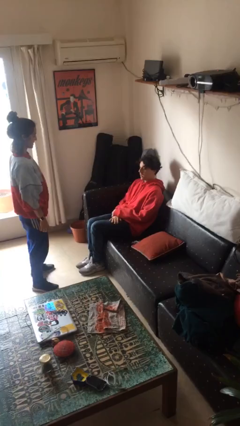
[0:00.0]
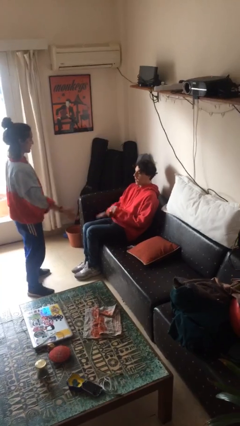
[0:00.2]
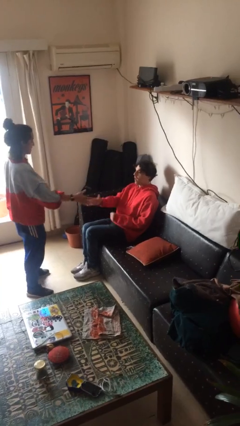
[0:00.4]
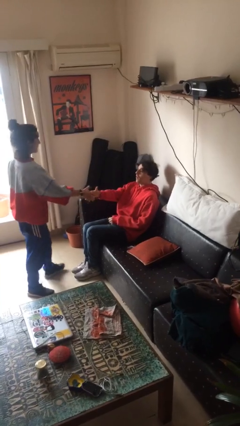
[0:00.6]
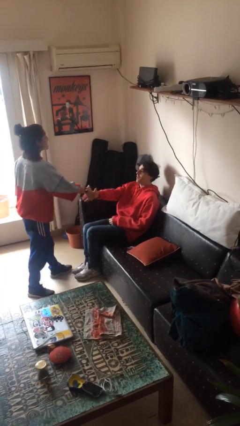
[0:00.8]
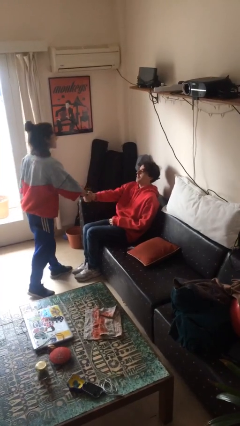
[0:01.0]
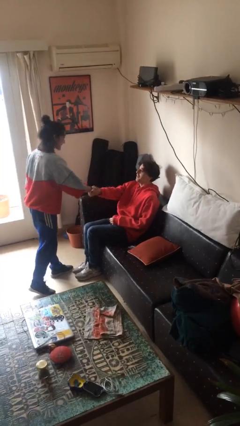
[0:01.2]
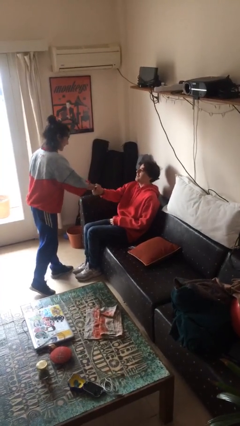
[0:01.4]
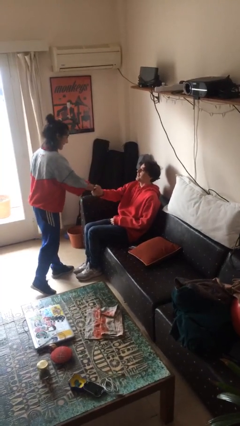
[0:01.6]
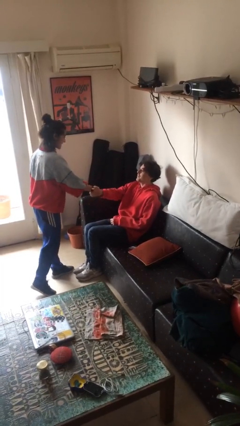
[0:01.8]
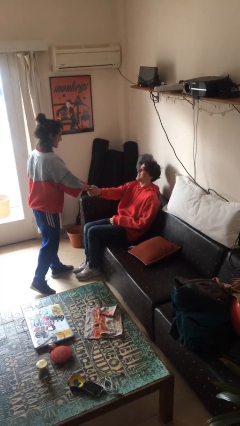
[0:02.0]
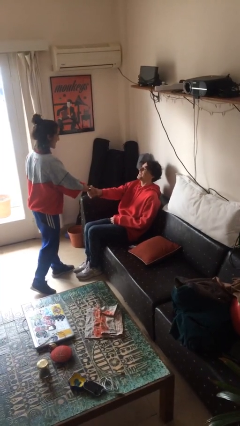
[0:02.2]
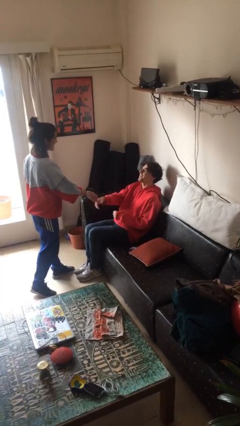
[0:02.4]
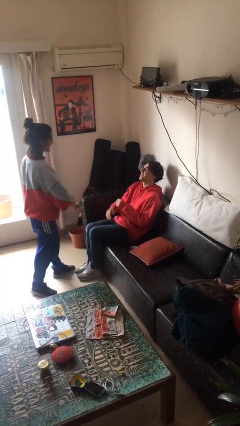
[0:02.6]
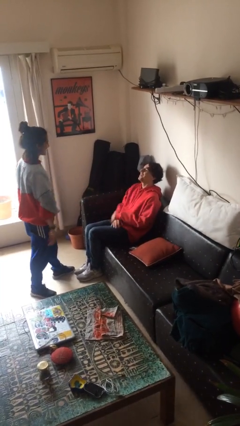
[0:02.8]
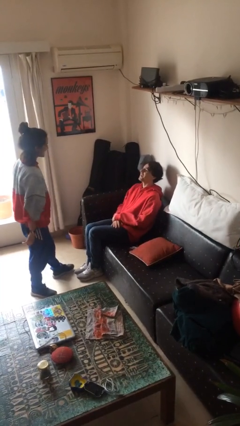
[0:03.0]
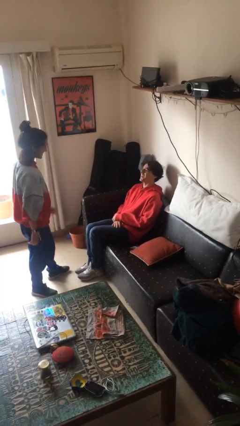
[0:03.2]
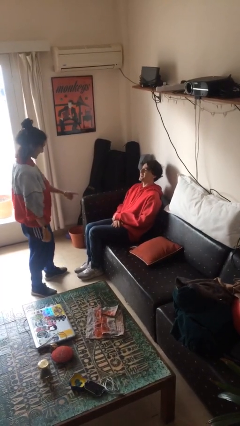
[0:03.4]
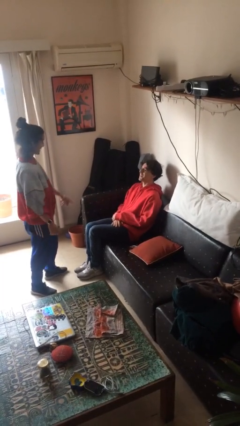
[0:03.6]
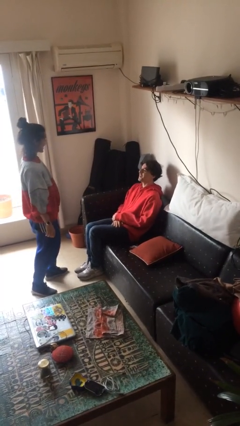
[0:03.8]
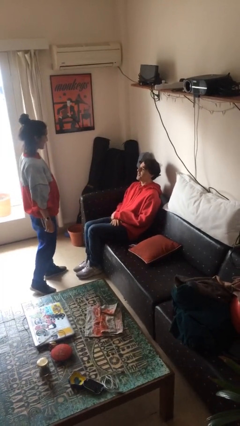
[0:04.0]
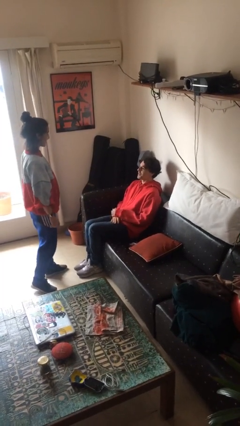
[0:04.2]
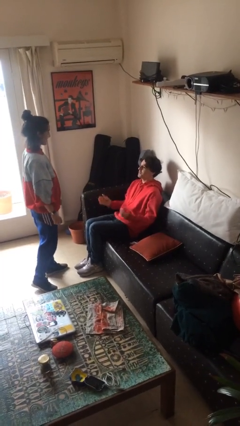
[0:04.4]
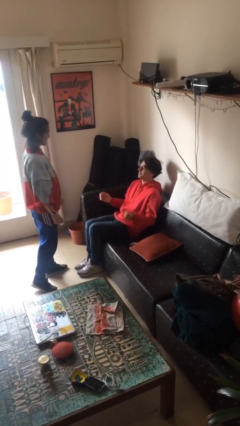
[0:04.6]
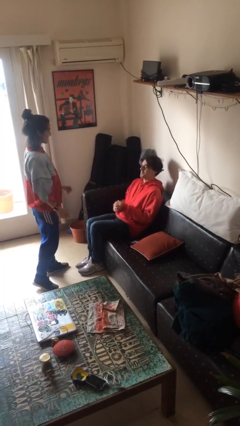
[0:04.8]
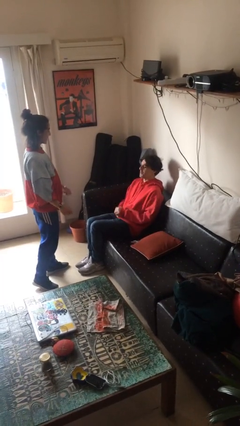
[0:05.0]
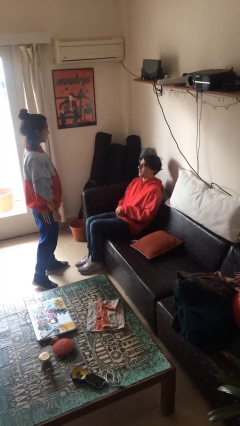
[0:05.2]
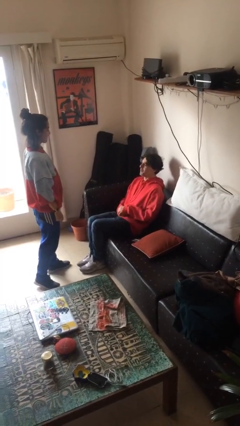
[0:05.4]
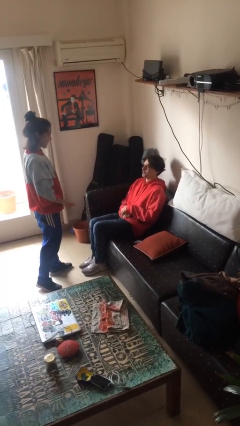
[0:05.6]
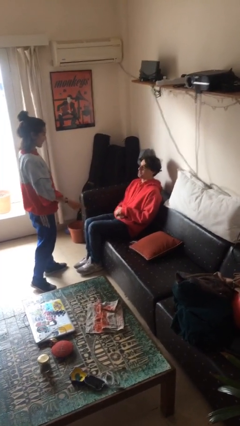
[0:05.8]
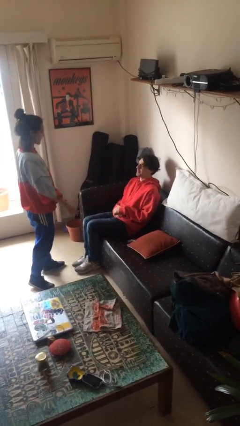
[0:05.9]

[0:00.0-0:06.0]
person shakes hand

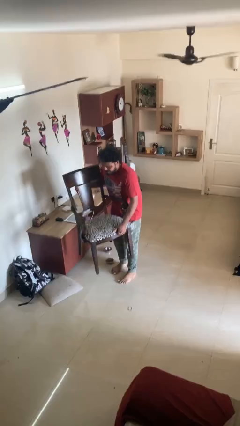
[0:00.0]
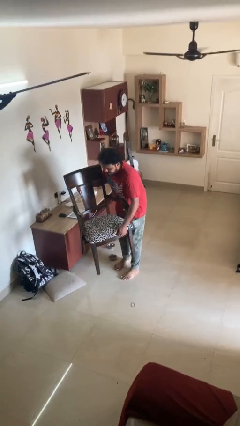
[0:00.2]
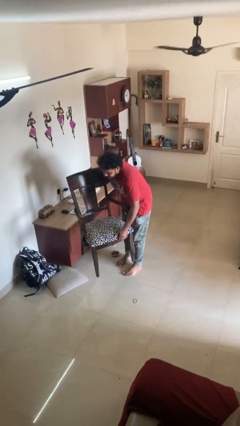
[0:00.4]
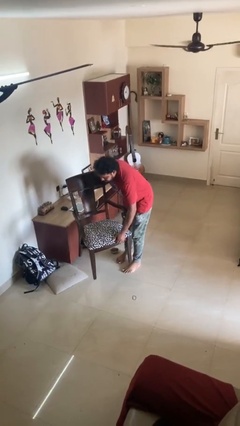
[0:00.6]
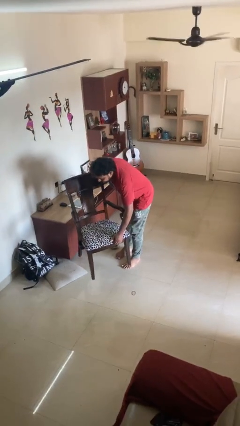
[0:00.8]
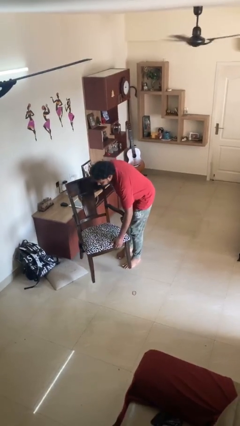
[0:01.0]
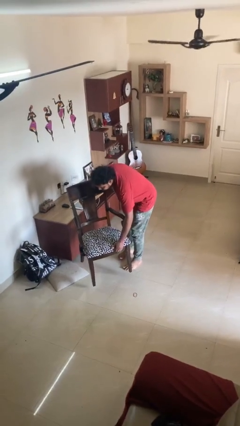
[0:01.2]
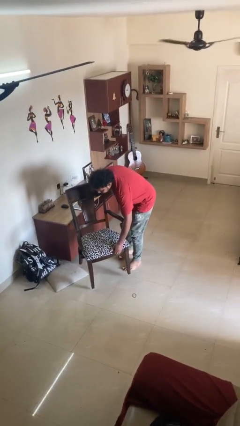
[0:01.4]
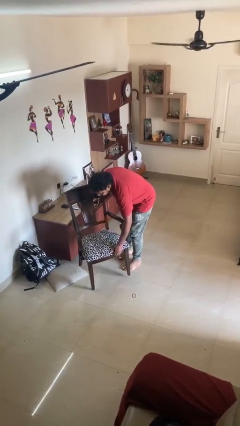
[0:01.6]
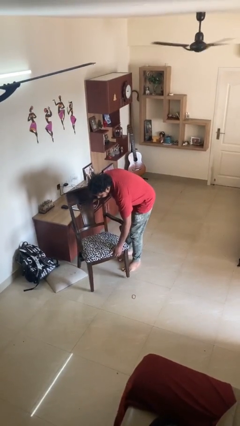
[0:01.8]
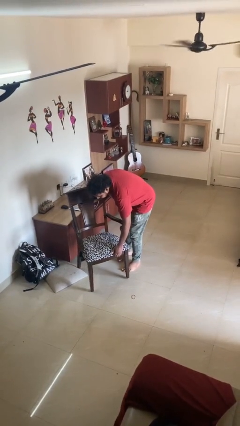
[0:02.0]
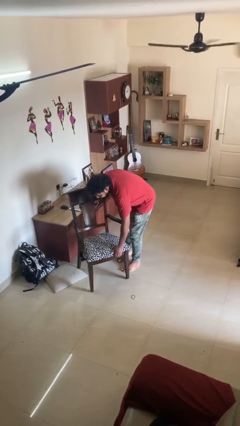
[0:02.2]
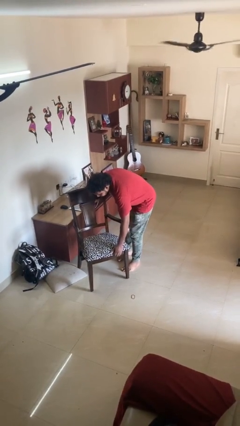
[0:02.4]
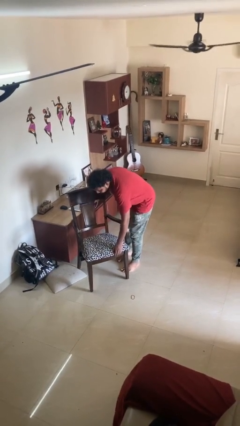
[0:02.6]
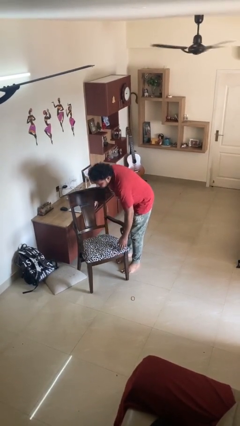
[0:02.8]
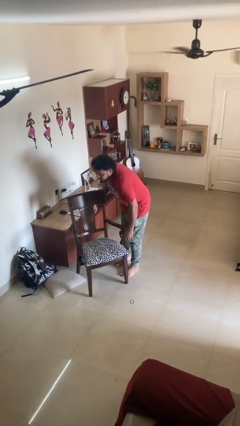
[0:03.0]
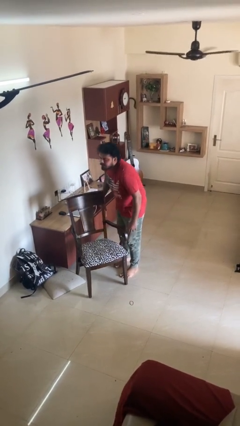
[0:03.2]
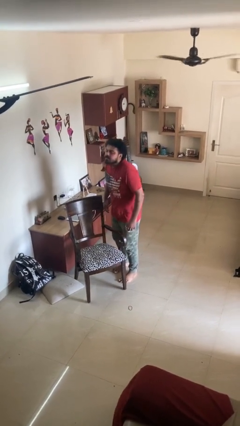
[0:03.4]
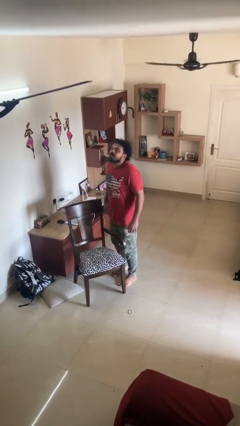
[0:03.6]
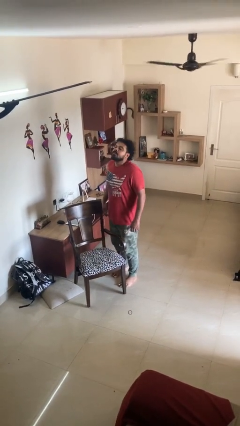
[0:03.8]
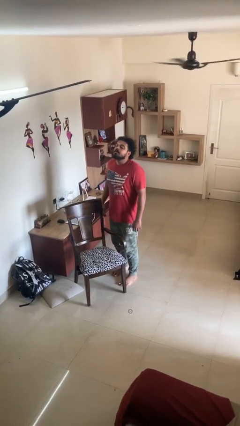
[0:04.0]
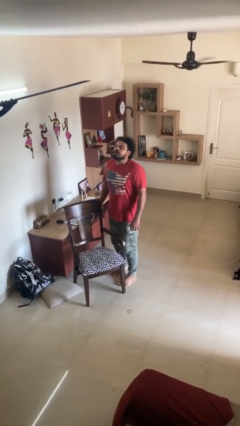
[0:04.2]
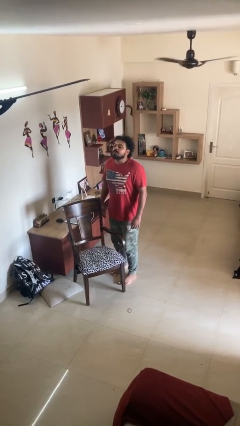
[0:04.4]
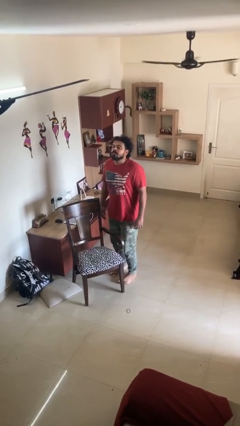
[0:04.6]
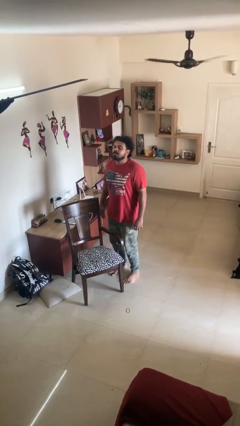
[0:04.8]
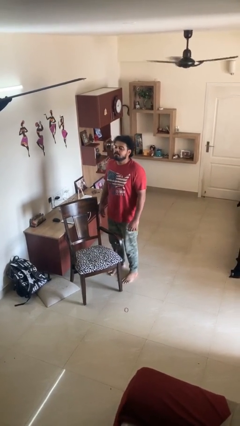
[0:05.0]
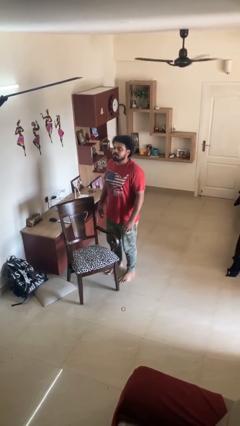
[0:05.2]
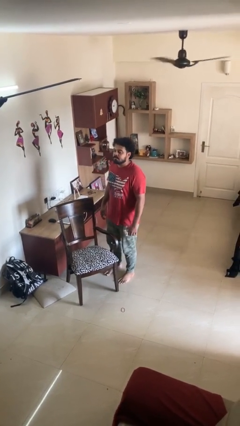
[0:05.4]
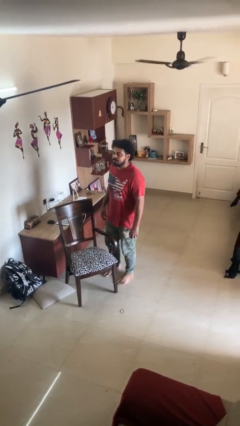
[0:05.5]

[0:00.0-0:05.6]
person puts down object on floor

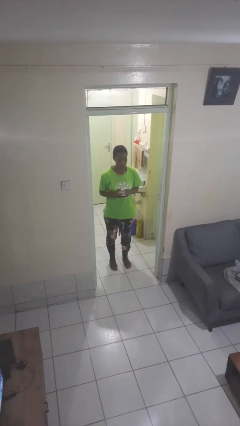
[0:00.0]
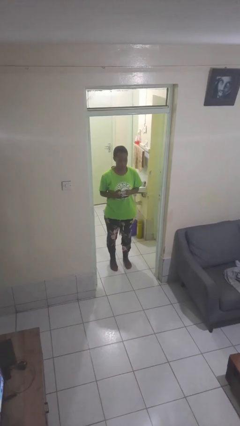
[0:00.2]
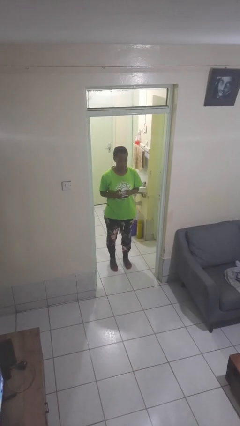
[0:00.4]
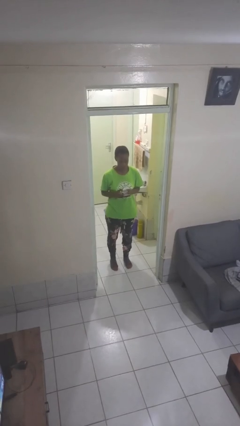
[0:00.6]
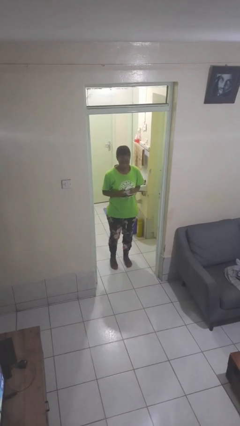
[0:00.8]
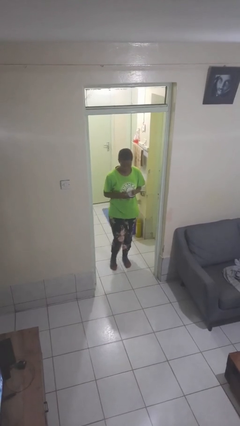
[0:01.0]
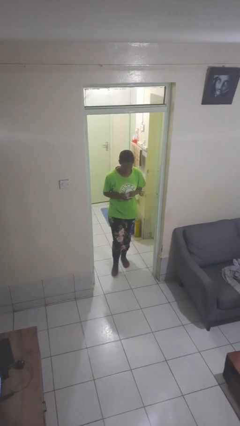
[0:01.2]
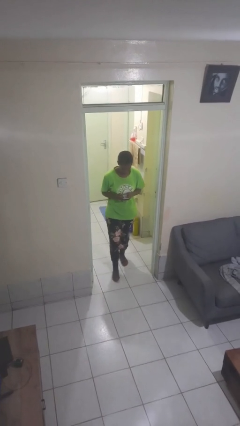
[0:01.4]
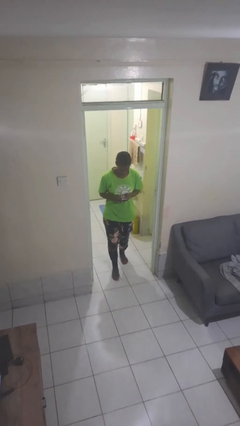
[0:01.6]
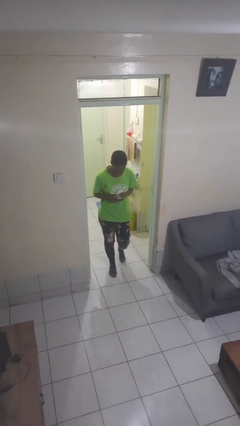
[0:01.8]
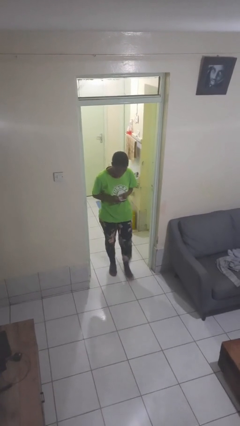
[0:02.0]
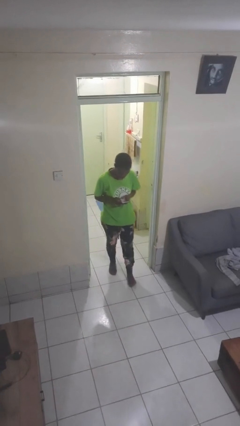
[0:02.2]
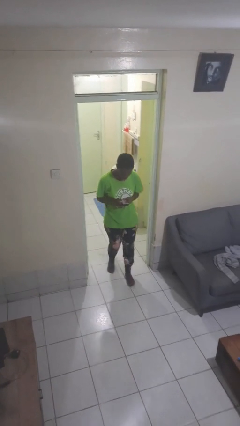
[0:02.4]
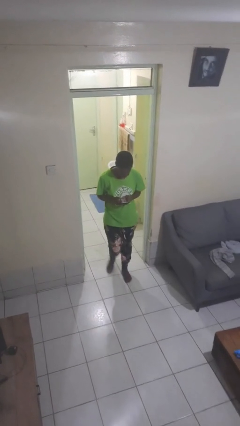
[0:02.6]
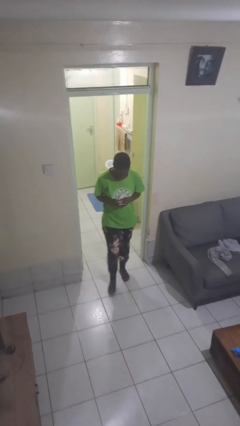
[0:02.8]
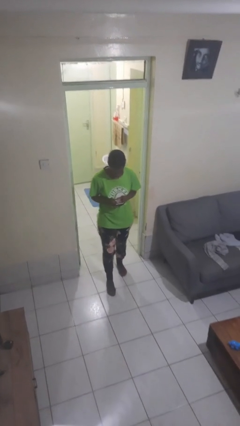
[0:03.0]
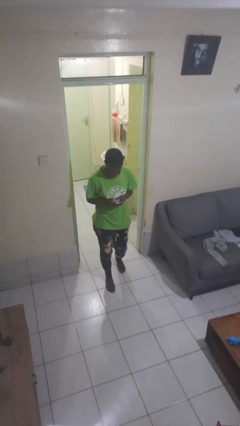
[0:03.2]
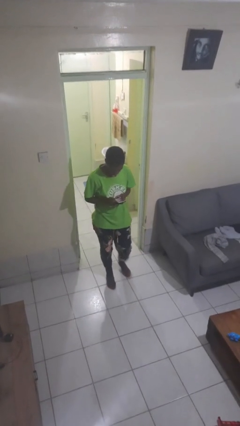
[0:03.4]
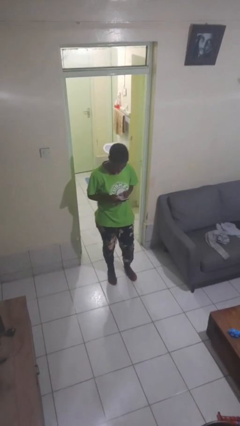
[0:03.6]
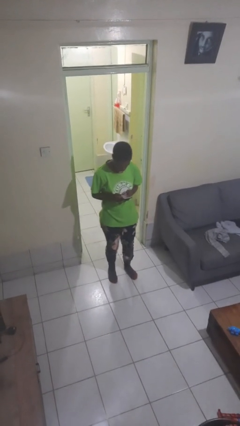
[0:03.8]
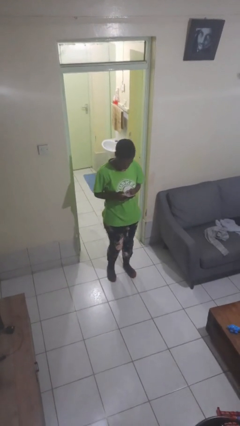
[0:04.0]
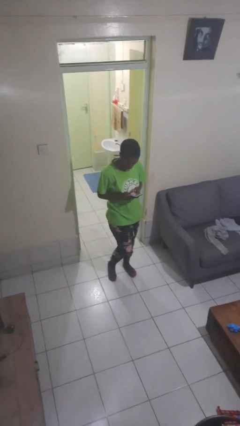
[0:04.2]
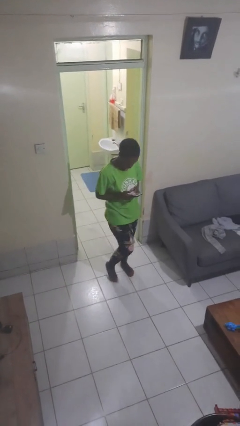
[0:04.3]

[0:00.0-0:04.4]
person enters scene through structure

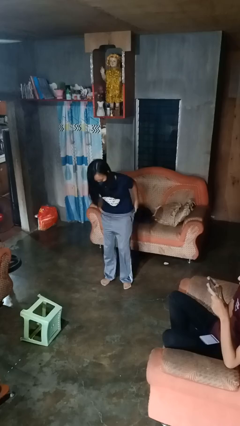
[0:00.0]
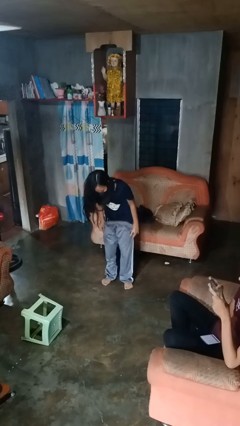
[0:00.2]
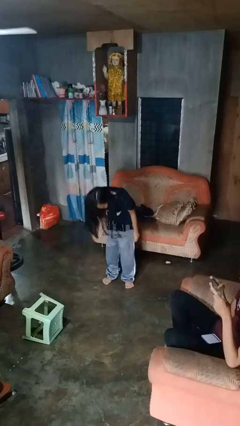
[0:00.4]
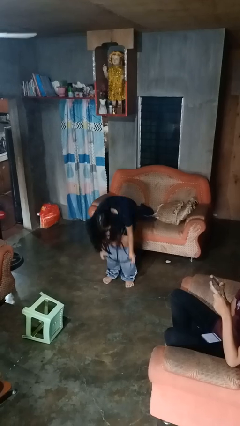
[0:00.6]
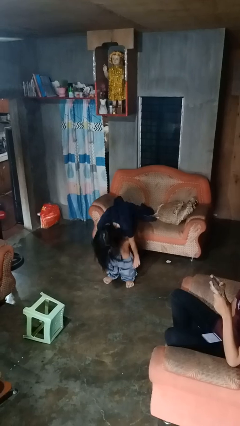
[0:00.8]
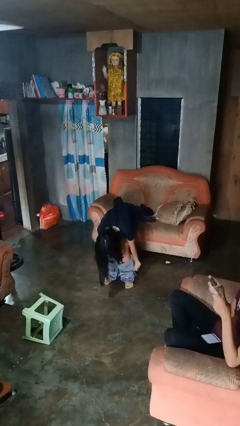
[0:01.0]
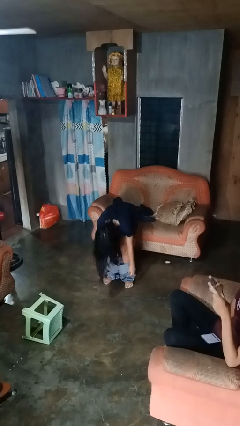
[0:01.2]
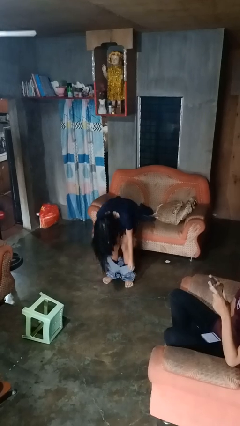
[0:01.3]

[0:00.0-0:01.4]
person takes off pants

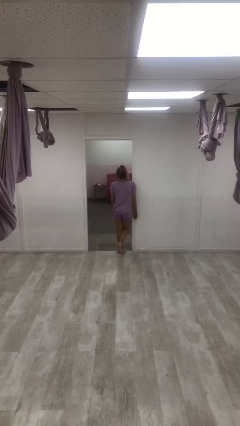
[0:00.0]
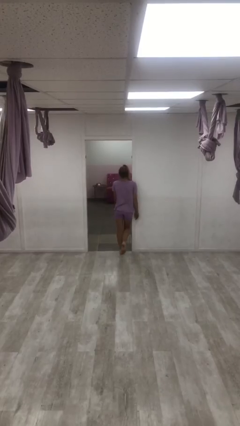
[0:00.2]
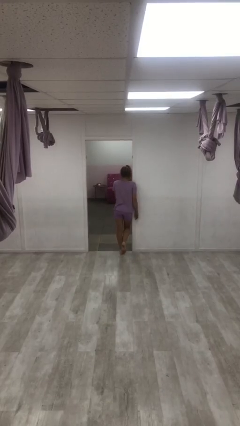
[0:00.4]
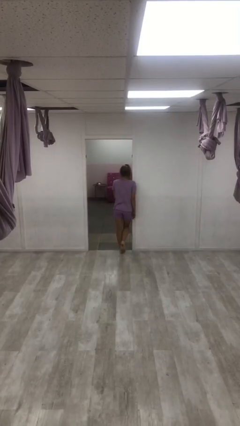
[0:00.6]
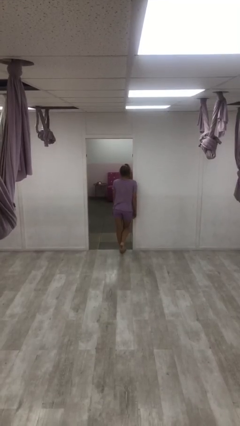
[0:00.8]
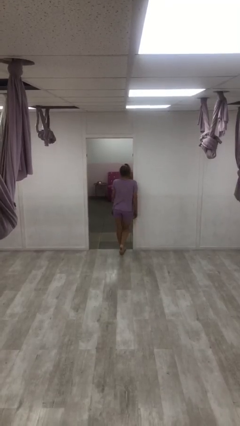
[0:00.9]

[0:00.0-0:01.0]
person bumps into wall
